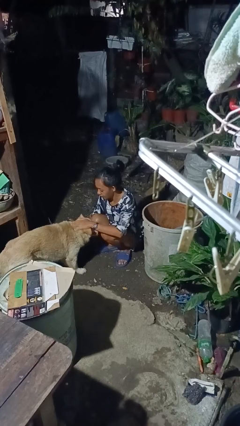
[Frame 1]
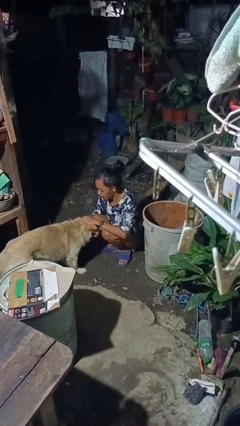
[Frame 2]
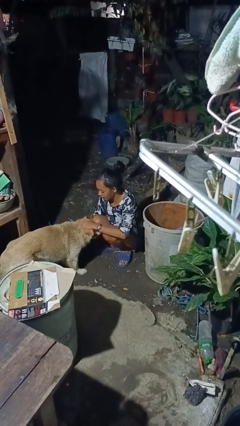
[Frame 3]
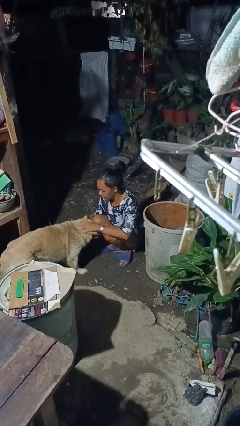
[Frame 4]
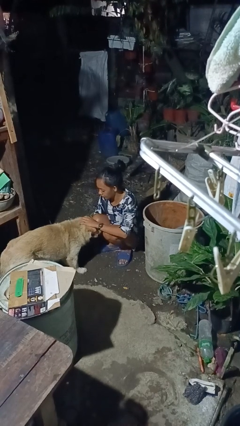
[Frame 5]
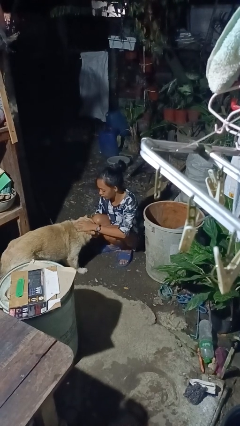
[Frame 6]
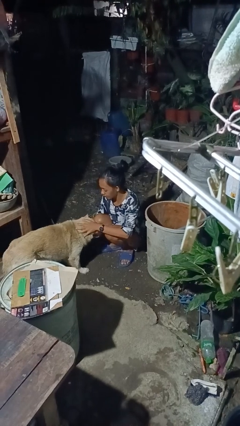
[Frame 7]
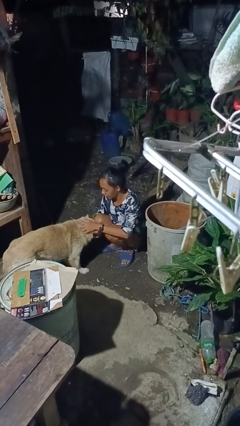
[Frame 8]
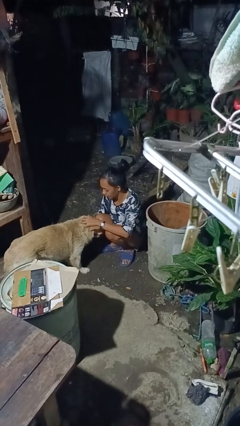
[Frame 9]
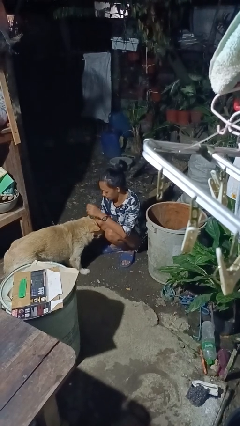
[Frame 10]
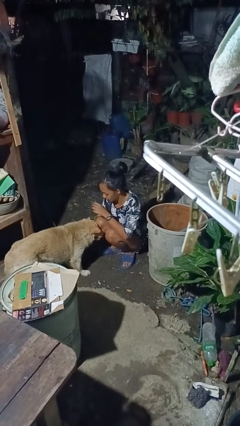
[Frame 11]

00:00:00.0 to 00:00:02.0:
person pets dog

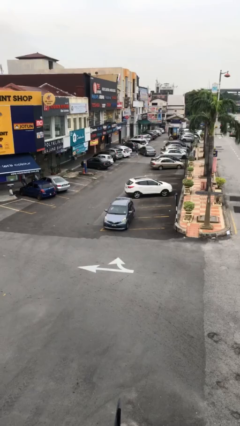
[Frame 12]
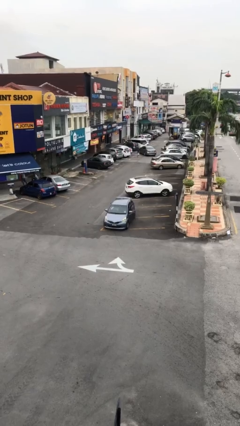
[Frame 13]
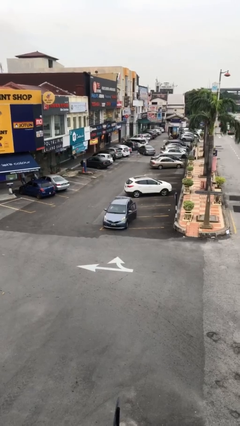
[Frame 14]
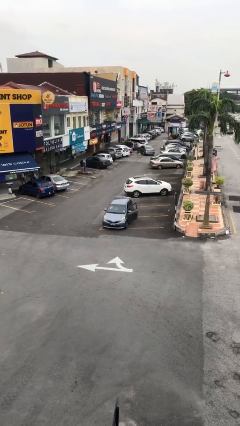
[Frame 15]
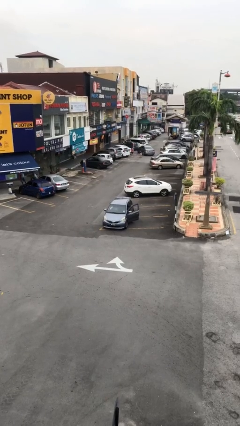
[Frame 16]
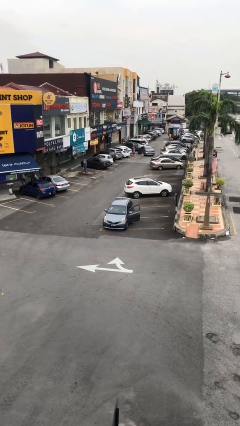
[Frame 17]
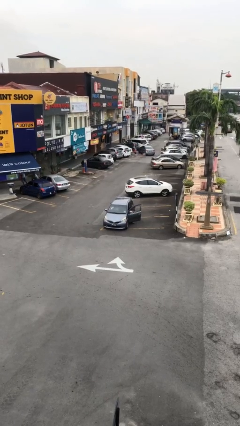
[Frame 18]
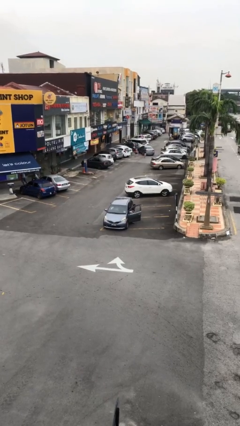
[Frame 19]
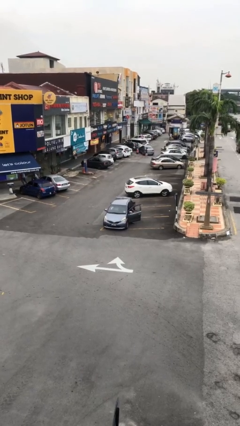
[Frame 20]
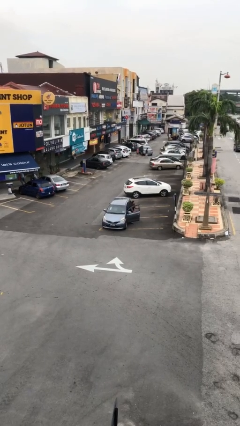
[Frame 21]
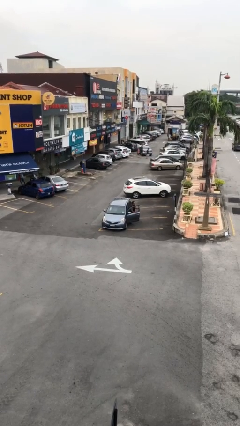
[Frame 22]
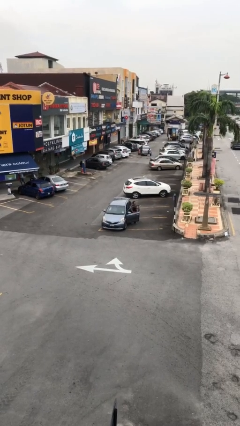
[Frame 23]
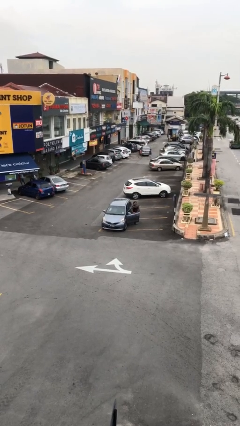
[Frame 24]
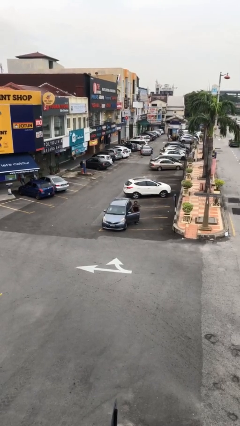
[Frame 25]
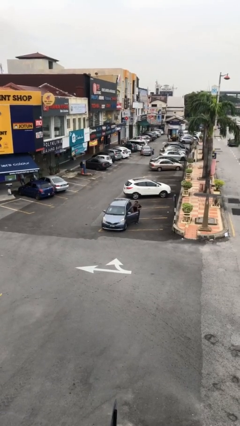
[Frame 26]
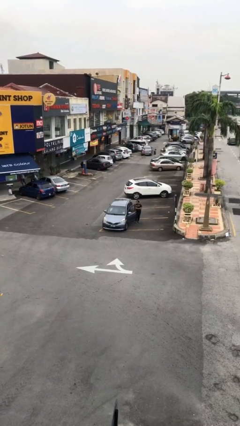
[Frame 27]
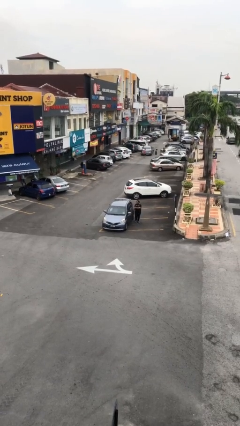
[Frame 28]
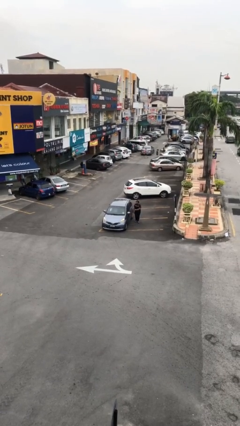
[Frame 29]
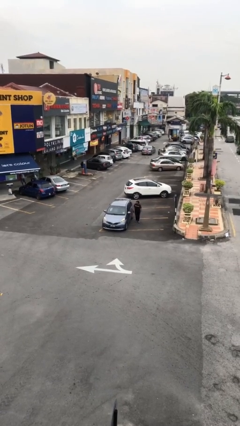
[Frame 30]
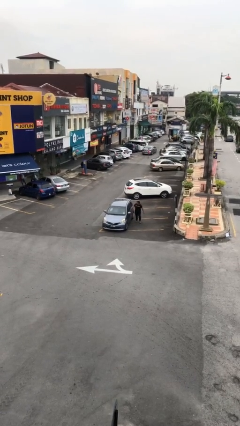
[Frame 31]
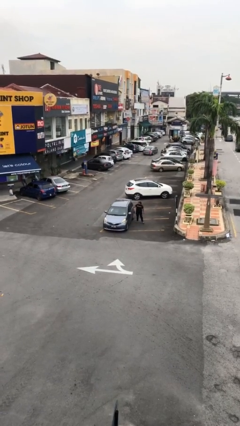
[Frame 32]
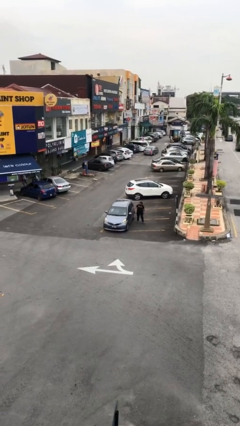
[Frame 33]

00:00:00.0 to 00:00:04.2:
car drops off person

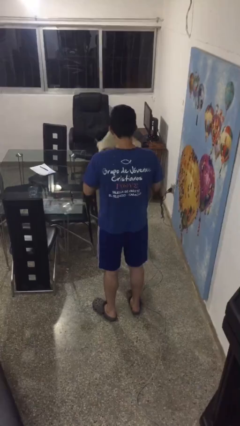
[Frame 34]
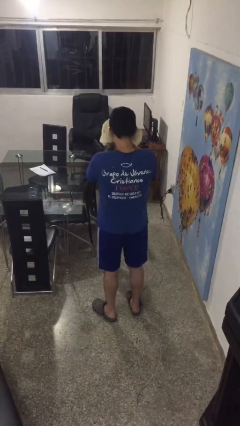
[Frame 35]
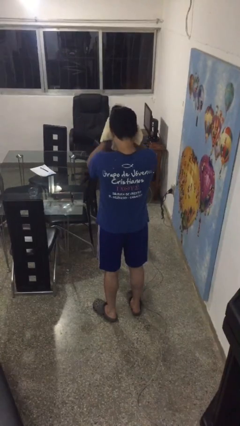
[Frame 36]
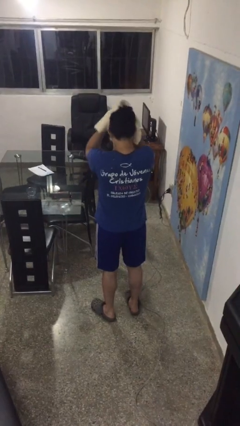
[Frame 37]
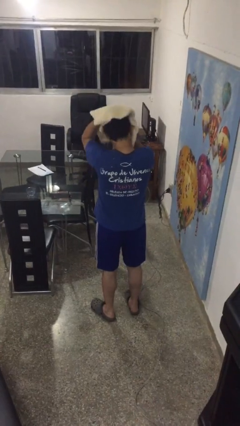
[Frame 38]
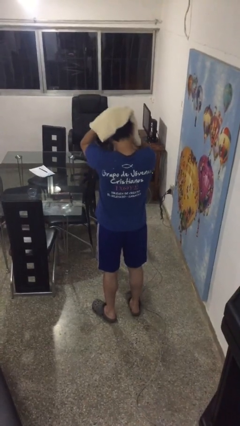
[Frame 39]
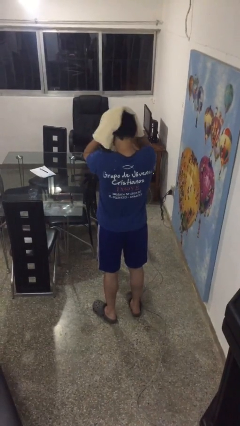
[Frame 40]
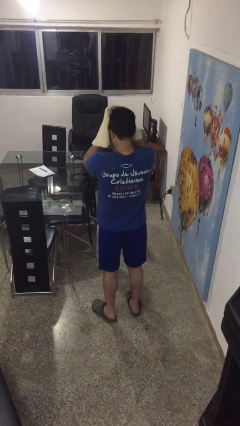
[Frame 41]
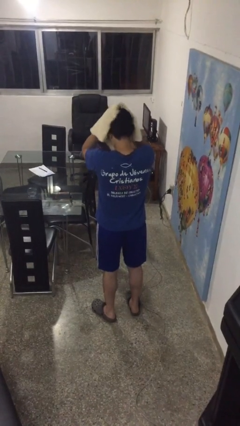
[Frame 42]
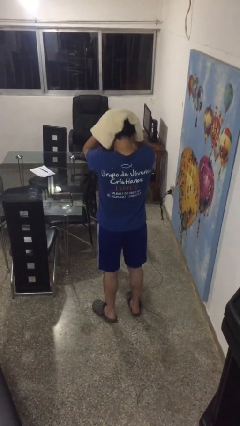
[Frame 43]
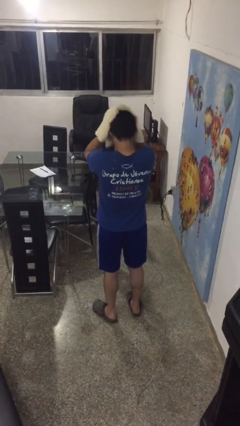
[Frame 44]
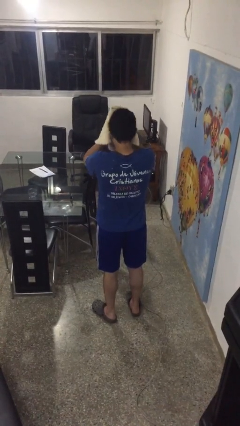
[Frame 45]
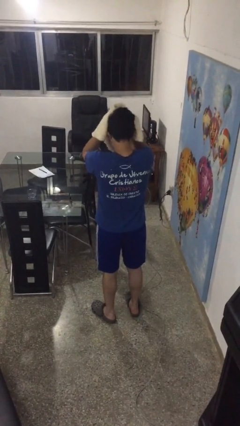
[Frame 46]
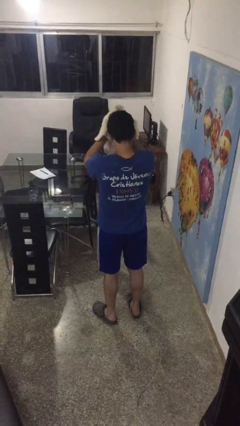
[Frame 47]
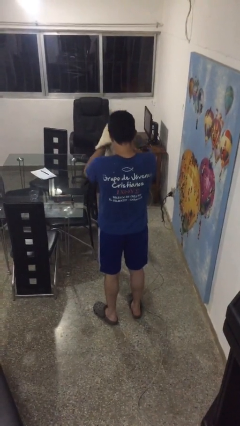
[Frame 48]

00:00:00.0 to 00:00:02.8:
person dries hair with towel

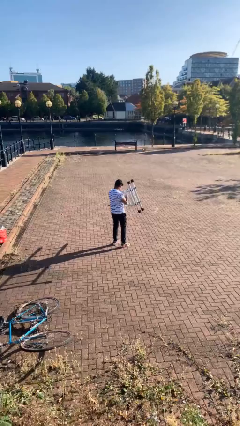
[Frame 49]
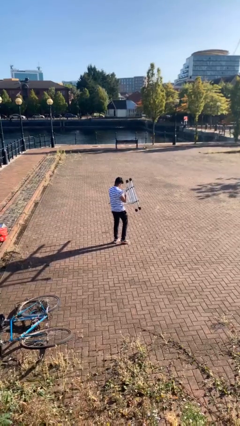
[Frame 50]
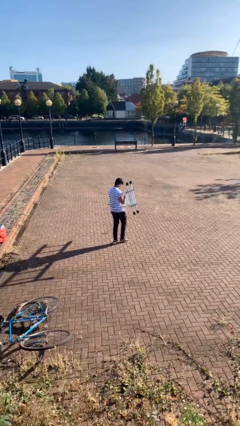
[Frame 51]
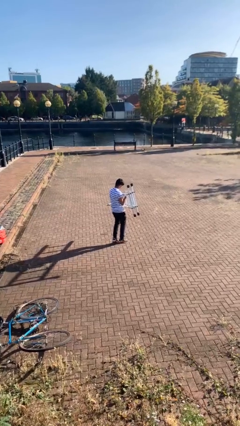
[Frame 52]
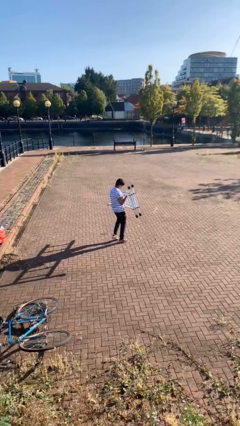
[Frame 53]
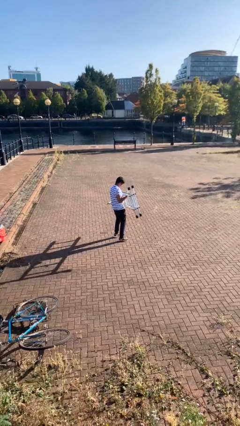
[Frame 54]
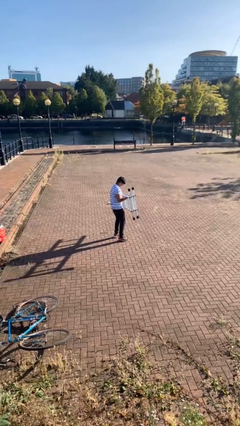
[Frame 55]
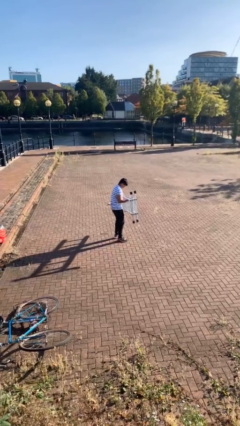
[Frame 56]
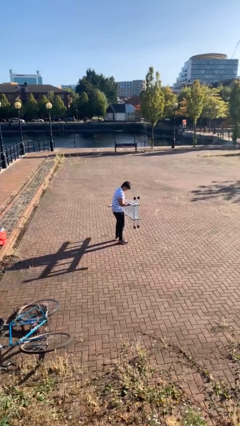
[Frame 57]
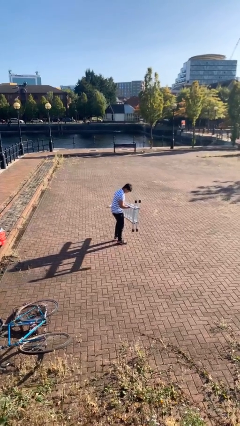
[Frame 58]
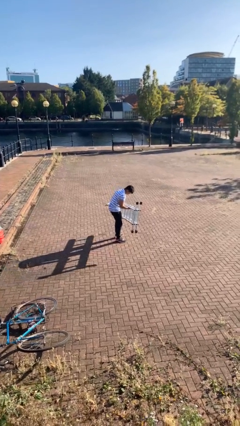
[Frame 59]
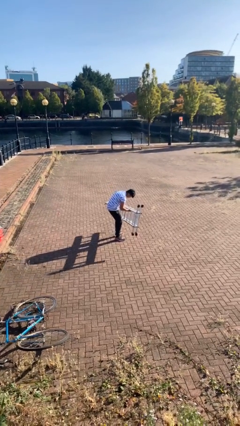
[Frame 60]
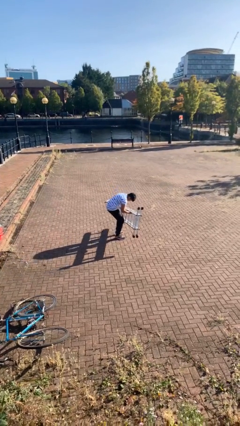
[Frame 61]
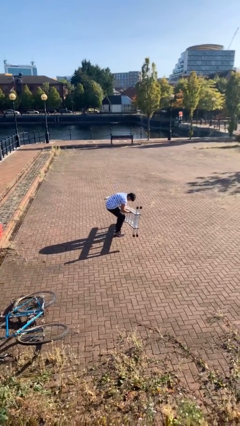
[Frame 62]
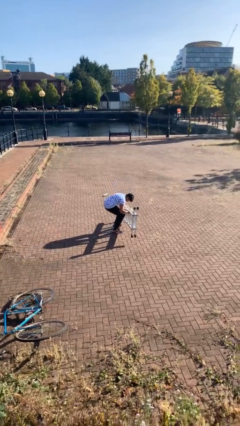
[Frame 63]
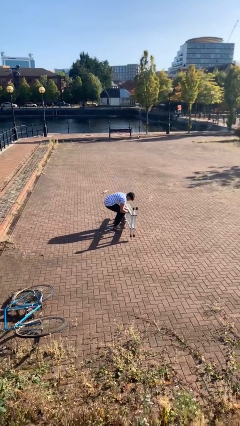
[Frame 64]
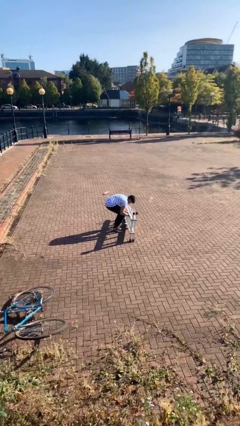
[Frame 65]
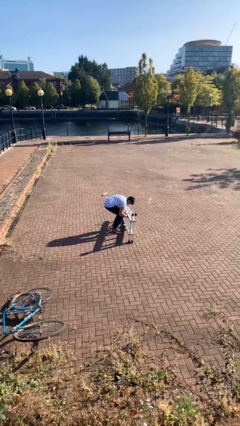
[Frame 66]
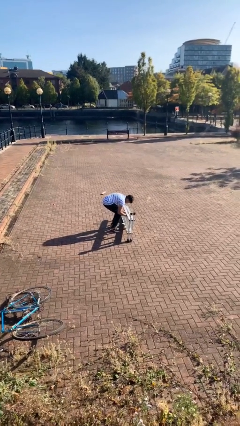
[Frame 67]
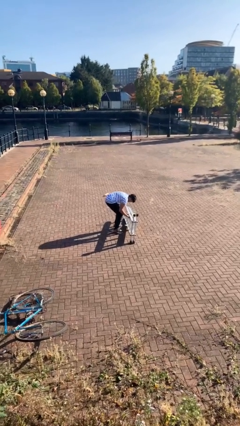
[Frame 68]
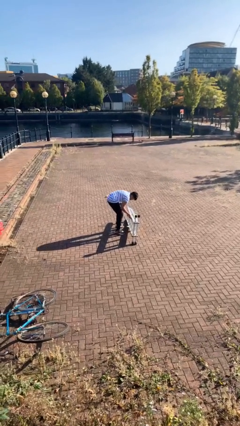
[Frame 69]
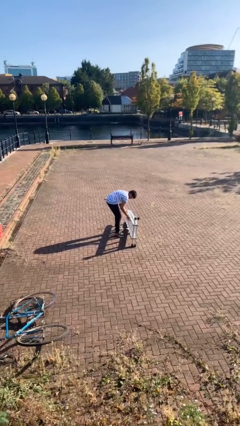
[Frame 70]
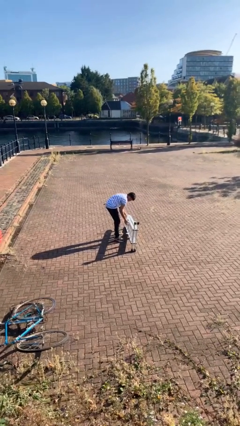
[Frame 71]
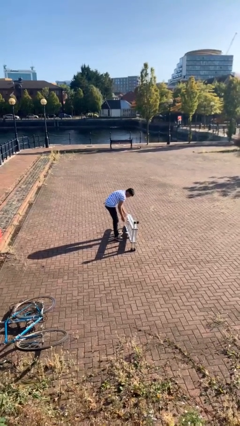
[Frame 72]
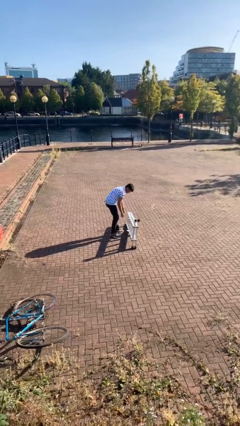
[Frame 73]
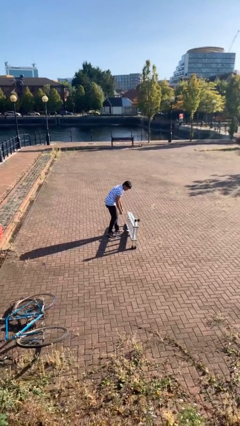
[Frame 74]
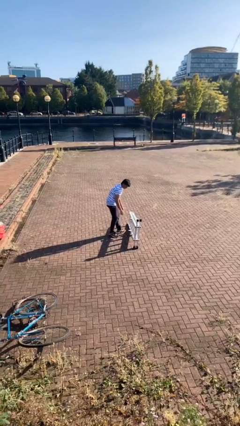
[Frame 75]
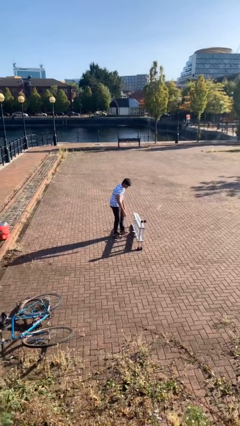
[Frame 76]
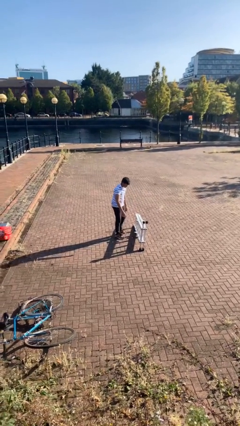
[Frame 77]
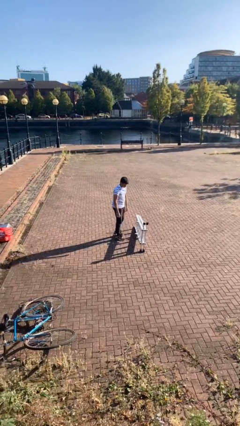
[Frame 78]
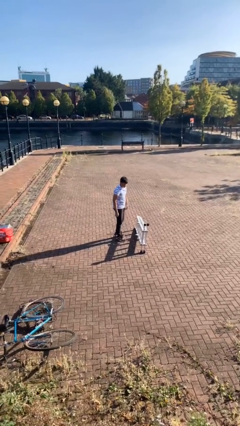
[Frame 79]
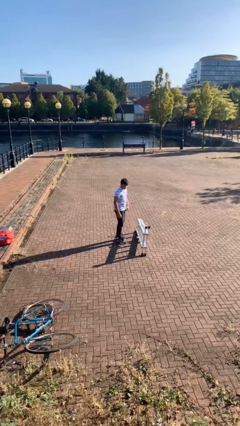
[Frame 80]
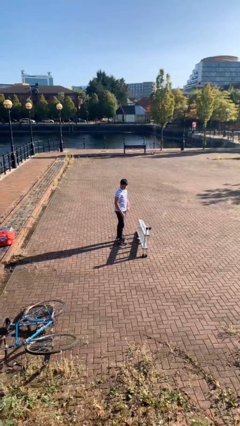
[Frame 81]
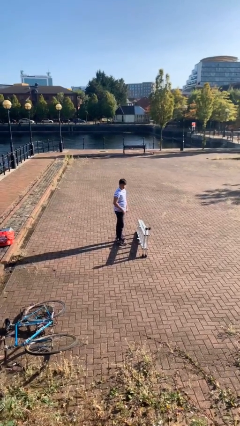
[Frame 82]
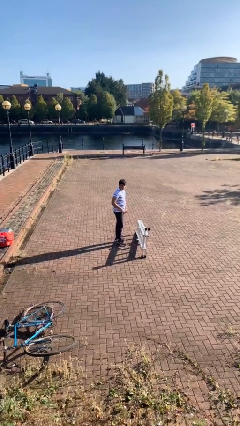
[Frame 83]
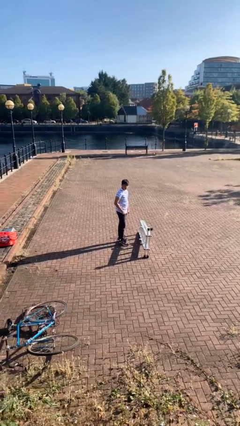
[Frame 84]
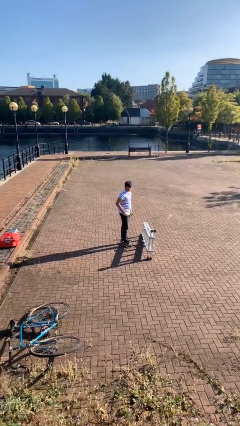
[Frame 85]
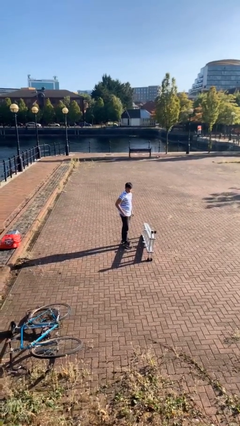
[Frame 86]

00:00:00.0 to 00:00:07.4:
person puts down object on floor

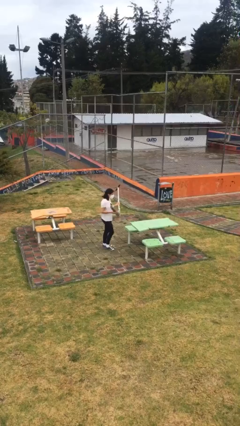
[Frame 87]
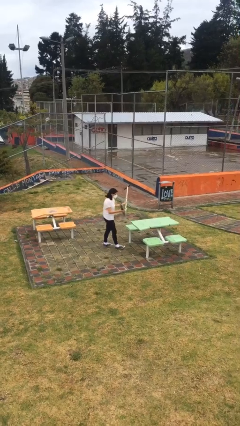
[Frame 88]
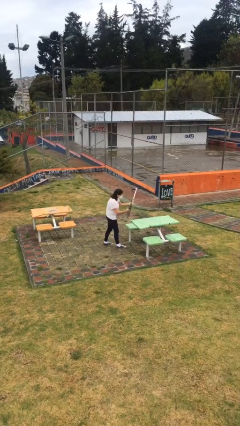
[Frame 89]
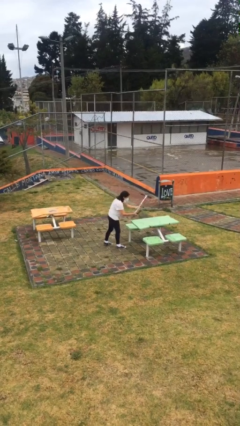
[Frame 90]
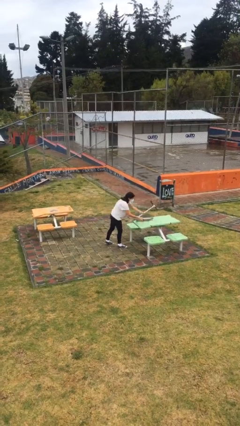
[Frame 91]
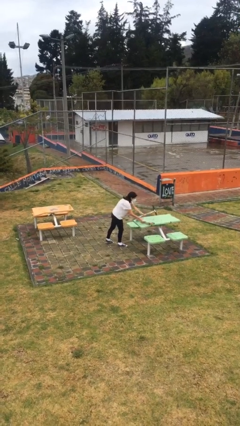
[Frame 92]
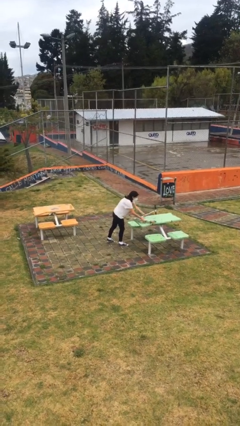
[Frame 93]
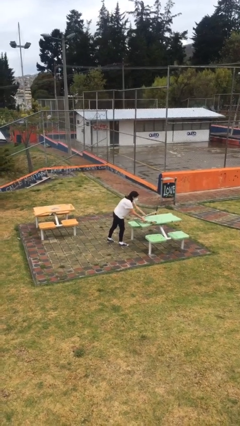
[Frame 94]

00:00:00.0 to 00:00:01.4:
person puts down object on table
